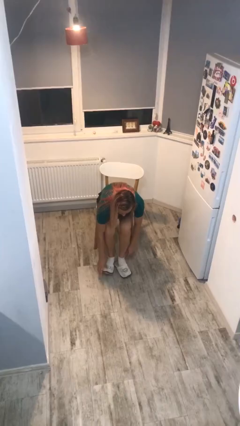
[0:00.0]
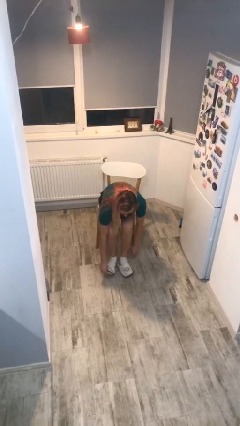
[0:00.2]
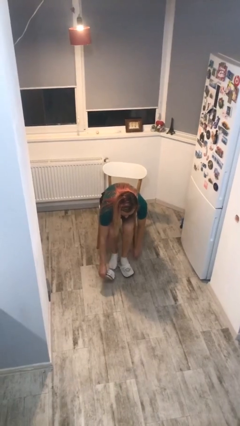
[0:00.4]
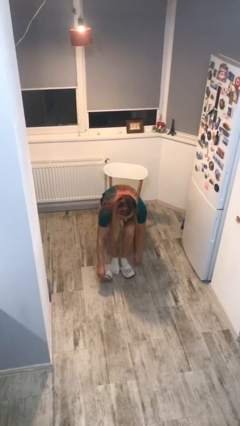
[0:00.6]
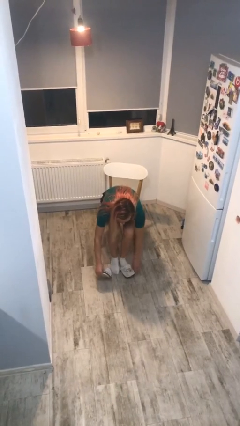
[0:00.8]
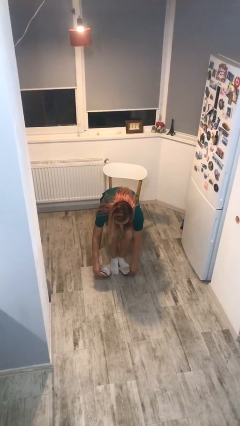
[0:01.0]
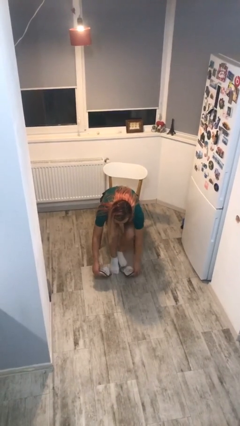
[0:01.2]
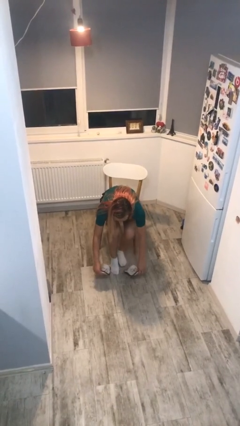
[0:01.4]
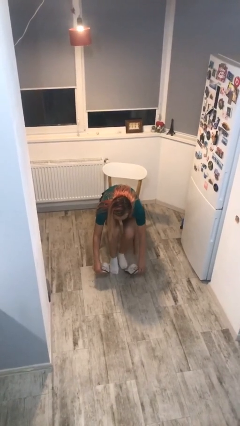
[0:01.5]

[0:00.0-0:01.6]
person takes off shoes

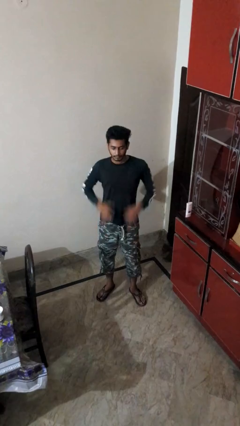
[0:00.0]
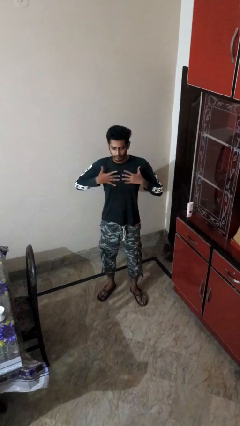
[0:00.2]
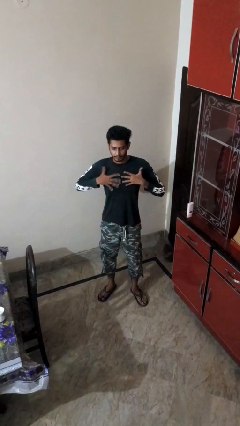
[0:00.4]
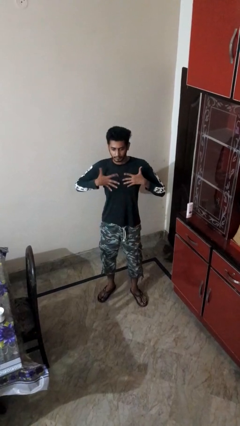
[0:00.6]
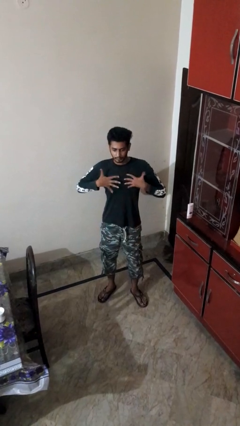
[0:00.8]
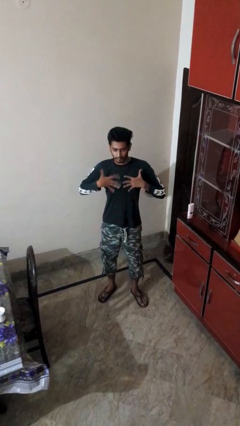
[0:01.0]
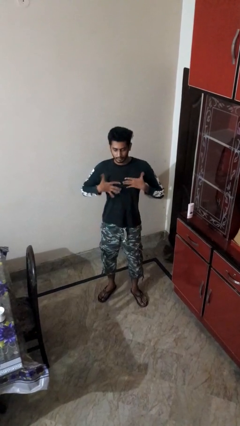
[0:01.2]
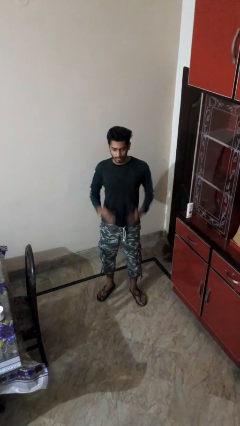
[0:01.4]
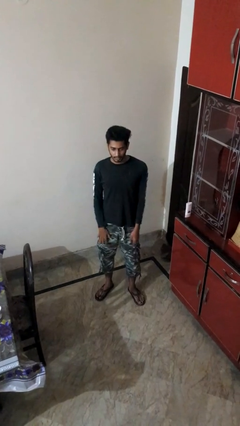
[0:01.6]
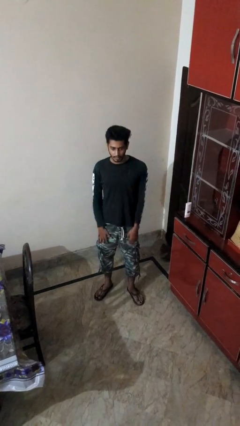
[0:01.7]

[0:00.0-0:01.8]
person drums on chest

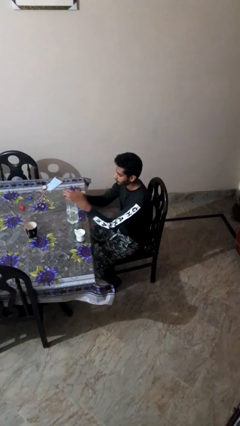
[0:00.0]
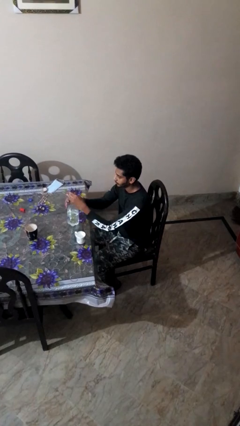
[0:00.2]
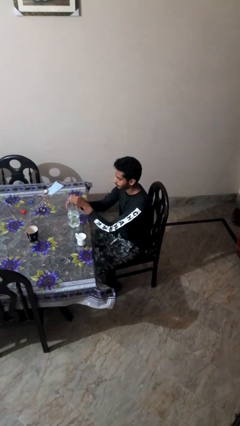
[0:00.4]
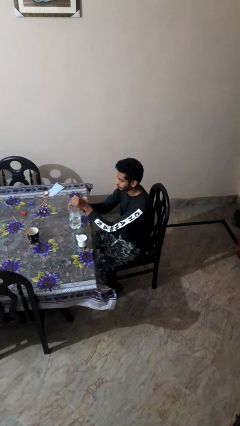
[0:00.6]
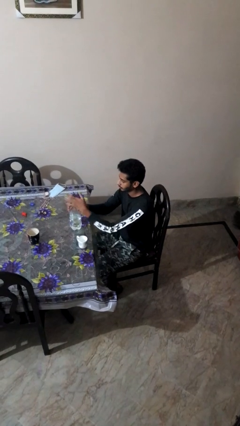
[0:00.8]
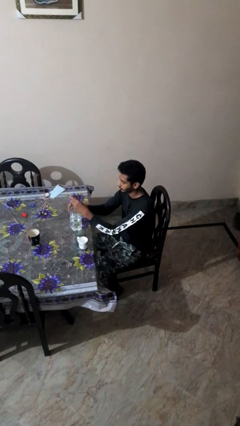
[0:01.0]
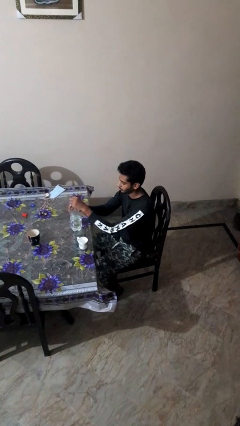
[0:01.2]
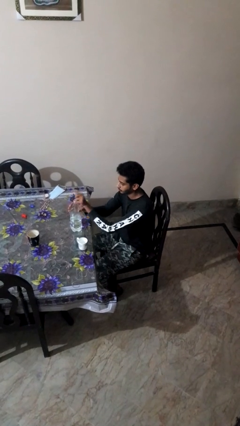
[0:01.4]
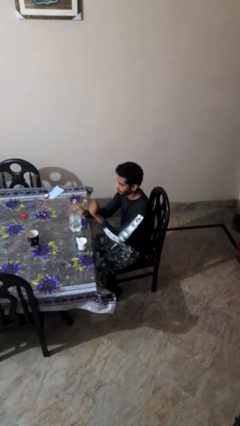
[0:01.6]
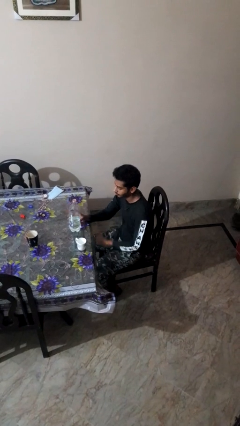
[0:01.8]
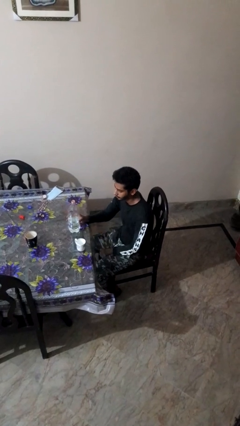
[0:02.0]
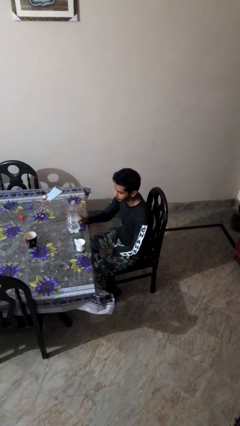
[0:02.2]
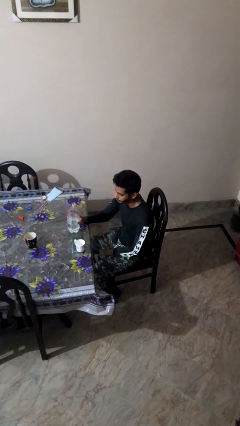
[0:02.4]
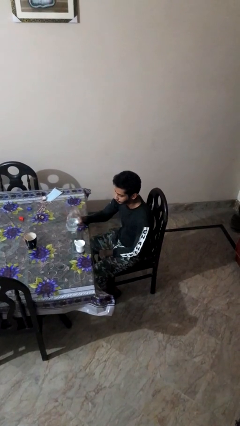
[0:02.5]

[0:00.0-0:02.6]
person unscrews lid from bottle

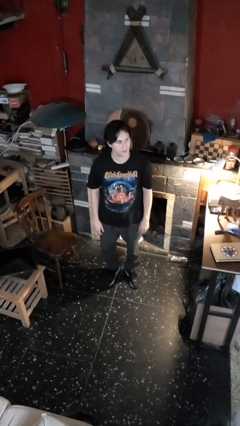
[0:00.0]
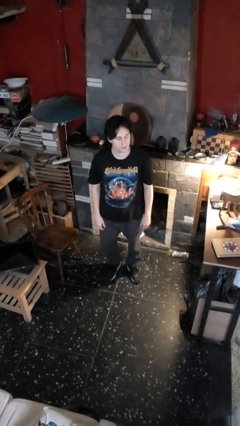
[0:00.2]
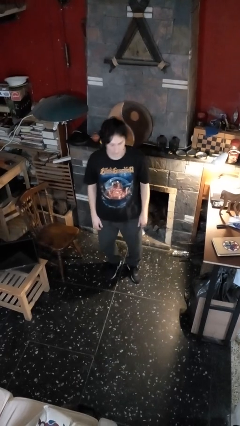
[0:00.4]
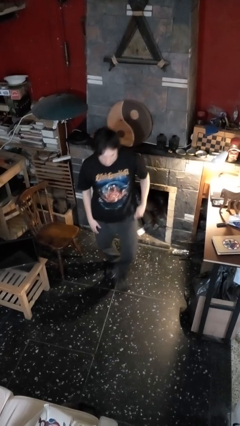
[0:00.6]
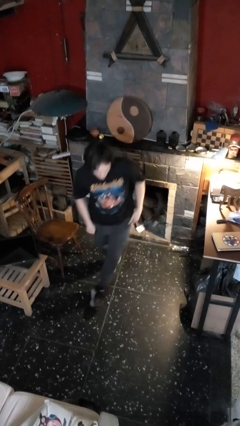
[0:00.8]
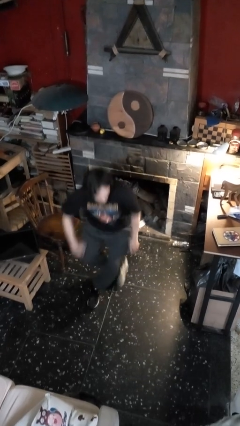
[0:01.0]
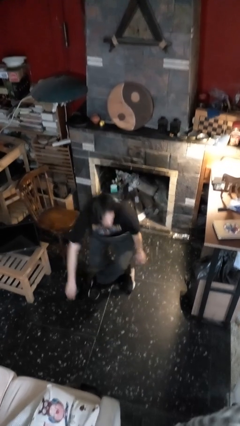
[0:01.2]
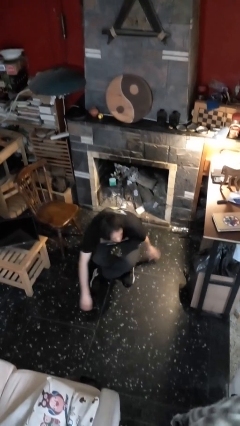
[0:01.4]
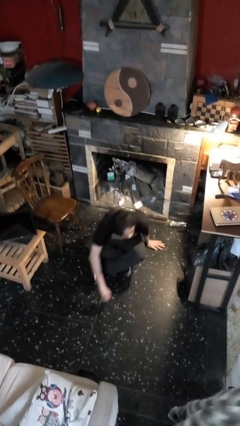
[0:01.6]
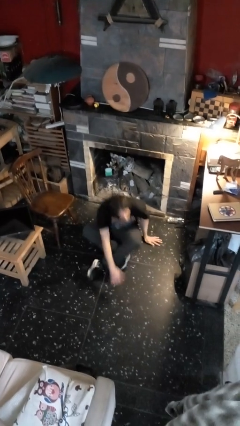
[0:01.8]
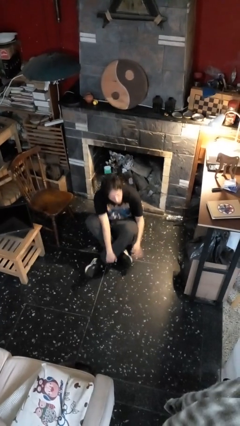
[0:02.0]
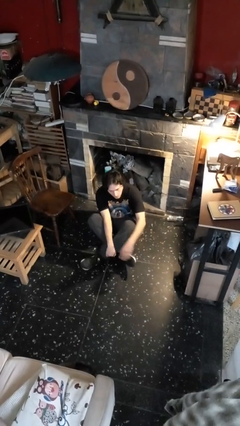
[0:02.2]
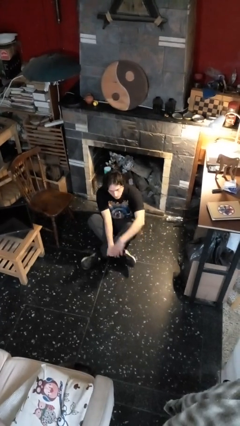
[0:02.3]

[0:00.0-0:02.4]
person sits crisscross

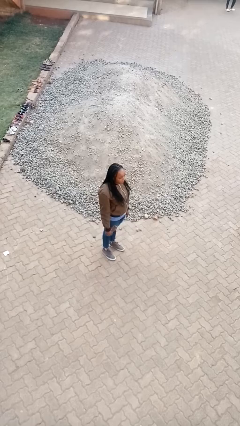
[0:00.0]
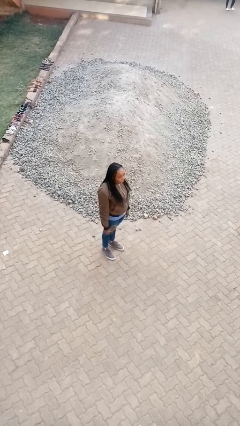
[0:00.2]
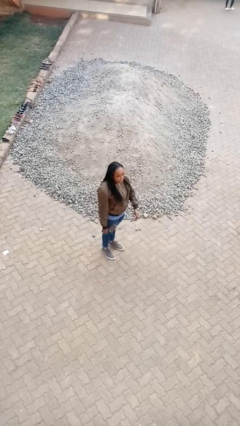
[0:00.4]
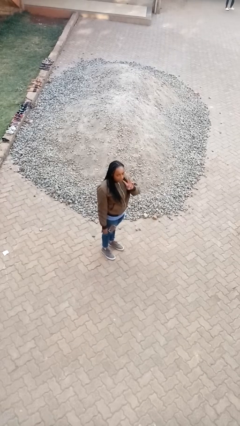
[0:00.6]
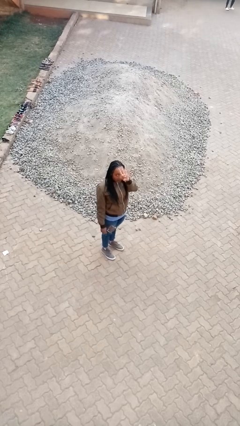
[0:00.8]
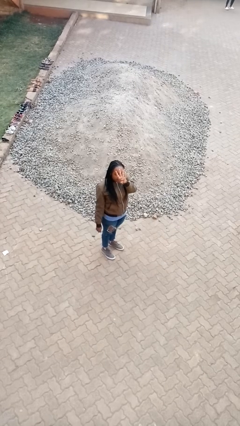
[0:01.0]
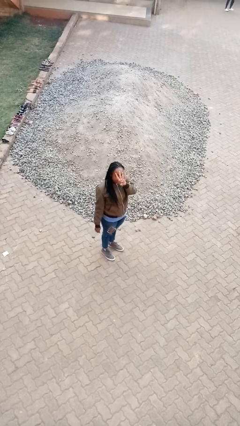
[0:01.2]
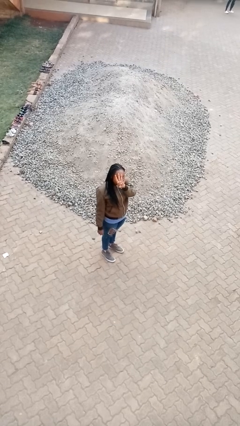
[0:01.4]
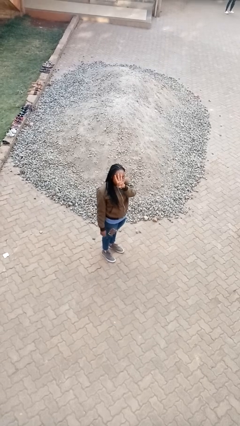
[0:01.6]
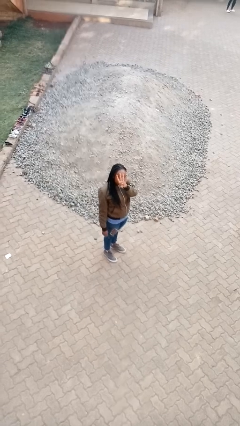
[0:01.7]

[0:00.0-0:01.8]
person gestures number four

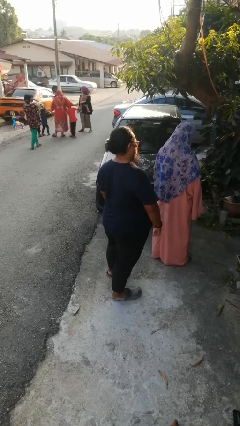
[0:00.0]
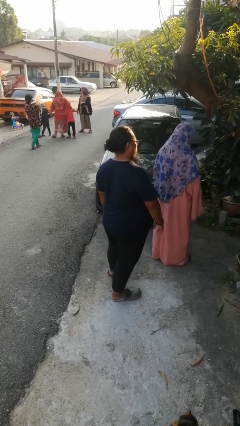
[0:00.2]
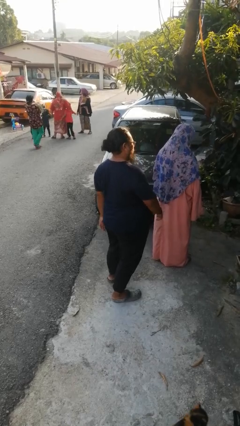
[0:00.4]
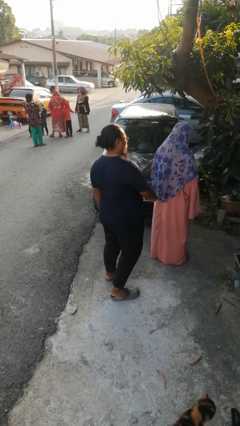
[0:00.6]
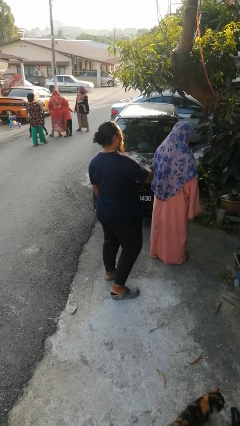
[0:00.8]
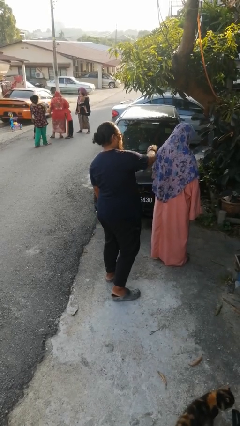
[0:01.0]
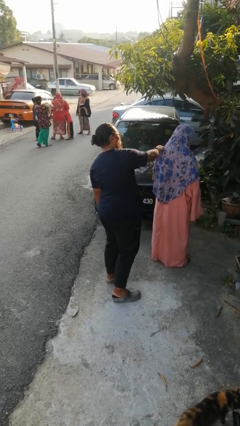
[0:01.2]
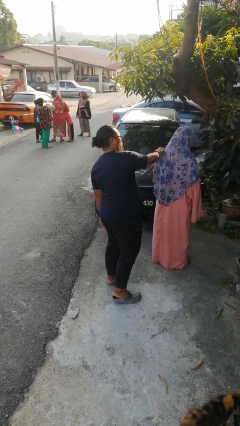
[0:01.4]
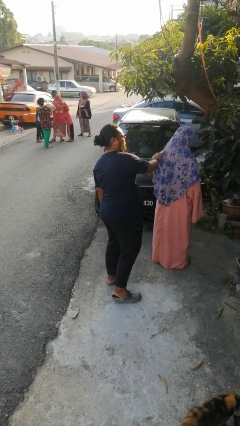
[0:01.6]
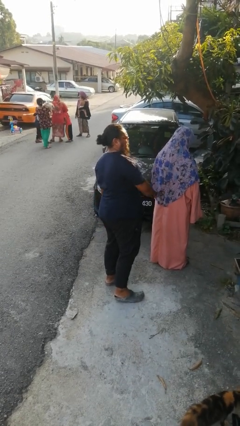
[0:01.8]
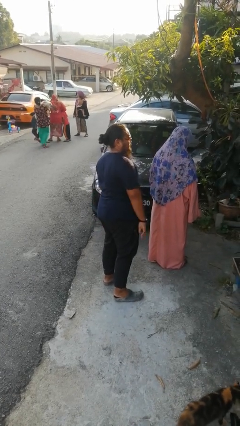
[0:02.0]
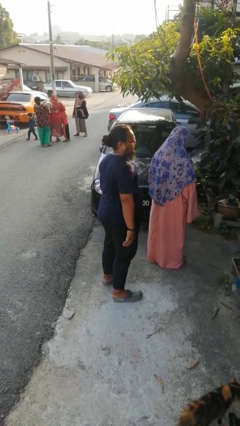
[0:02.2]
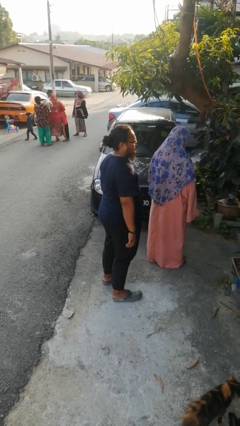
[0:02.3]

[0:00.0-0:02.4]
person touches back of person

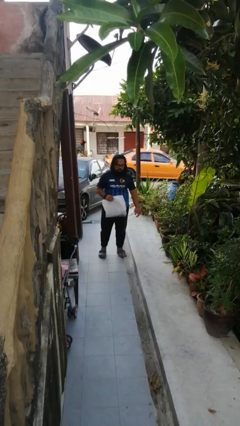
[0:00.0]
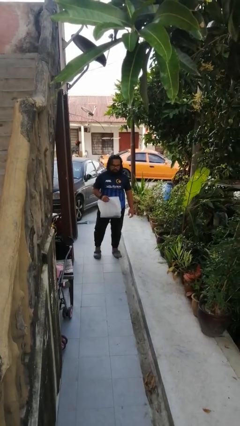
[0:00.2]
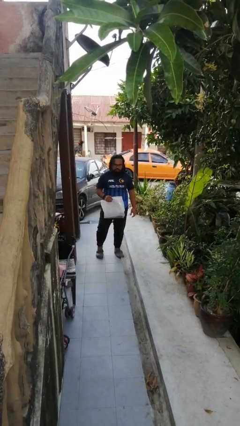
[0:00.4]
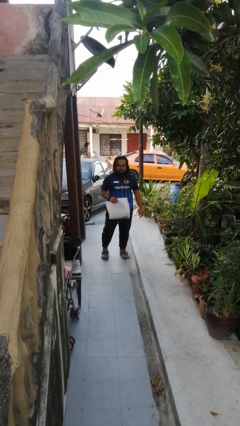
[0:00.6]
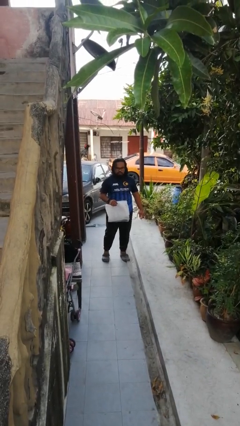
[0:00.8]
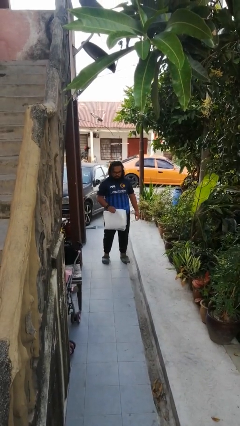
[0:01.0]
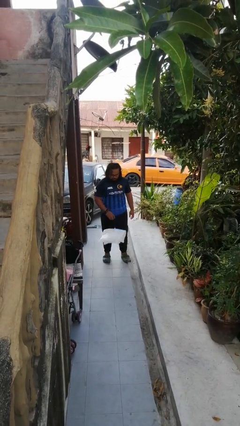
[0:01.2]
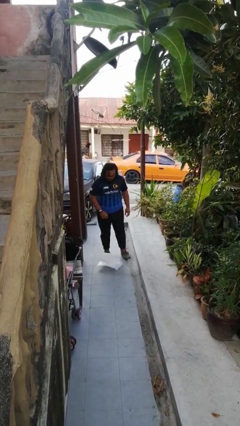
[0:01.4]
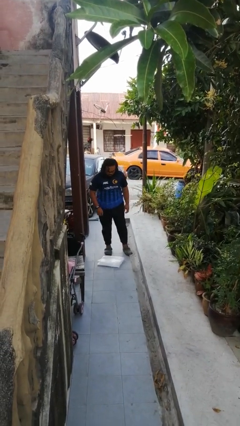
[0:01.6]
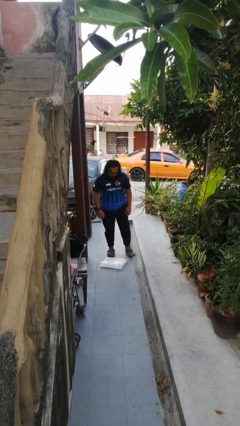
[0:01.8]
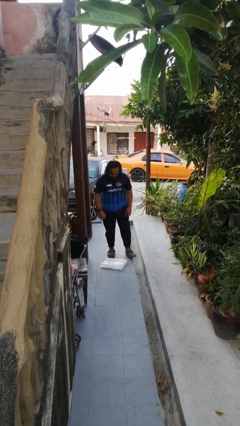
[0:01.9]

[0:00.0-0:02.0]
person drops object

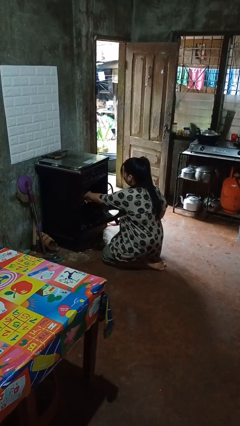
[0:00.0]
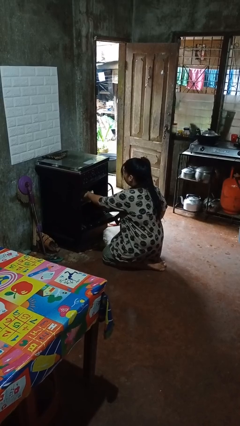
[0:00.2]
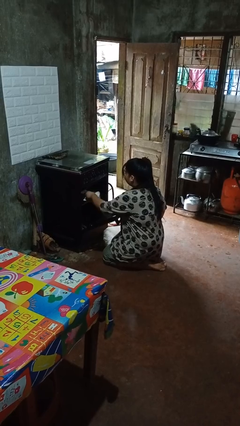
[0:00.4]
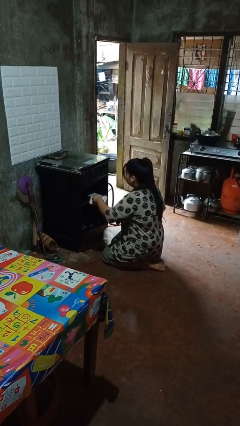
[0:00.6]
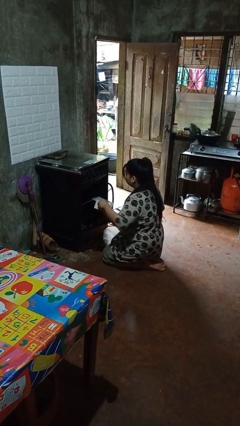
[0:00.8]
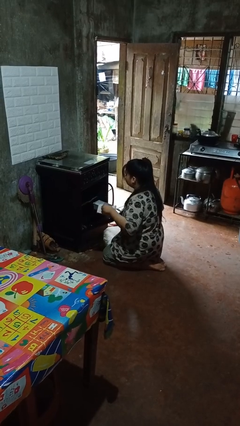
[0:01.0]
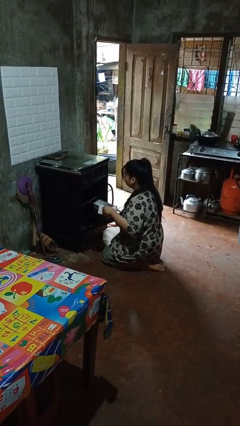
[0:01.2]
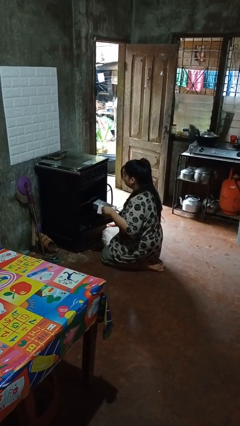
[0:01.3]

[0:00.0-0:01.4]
person takes object from oven

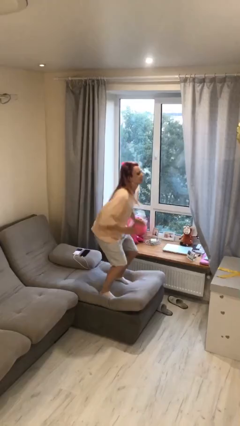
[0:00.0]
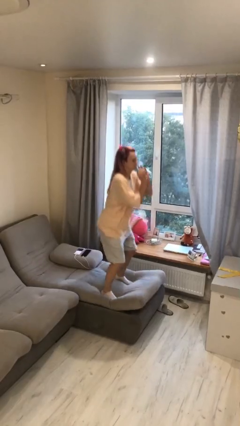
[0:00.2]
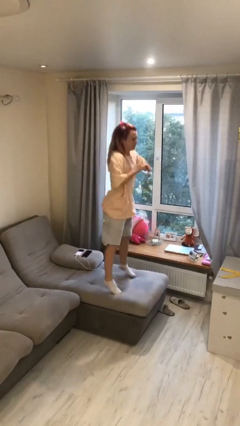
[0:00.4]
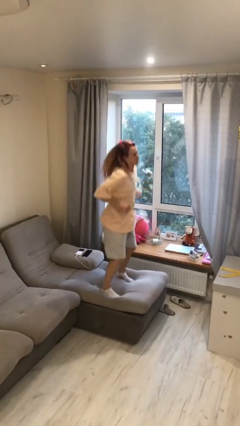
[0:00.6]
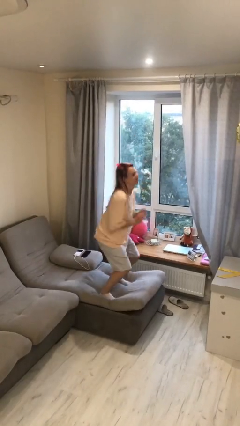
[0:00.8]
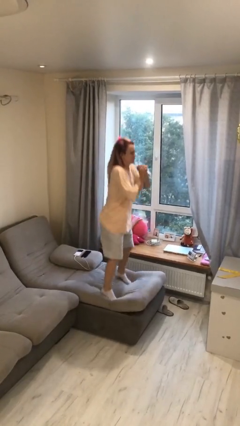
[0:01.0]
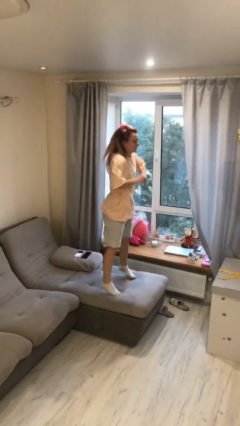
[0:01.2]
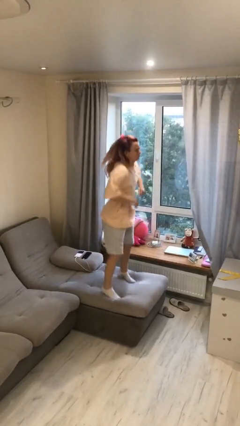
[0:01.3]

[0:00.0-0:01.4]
person jumps on couch
